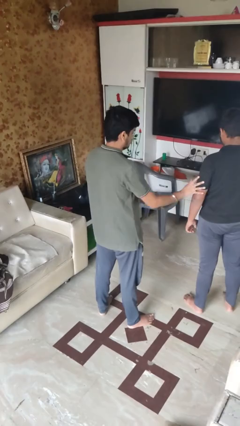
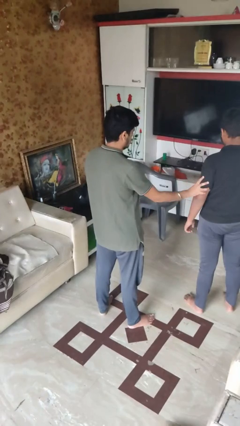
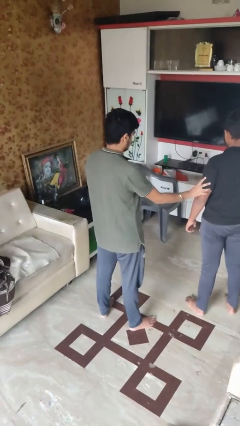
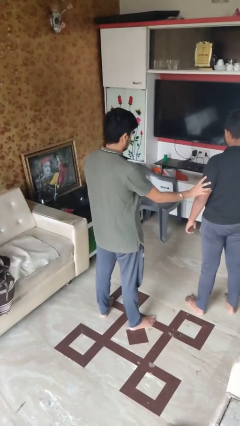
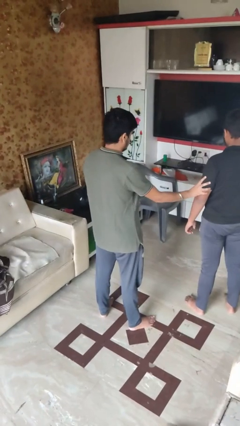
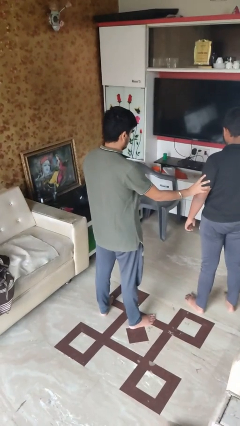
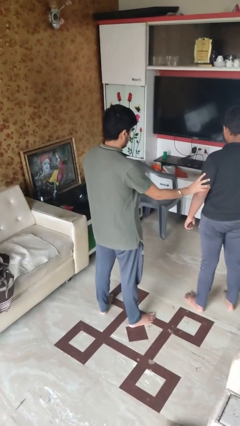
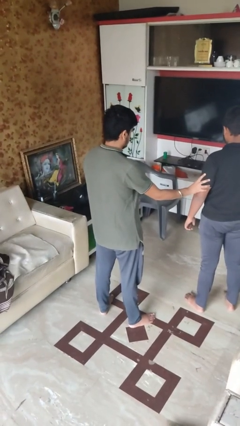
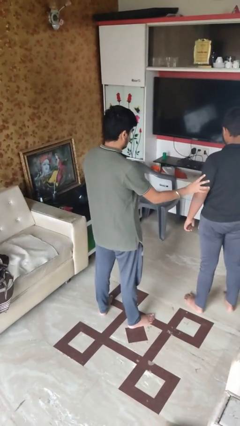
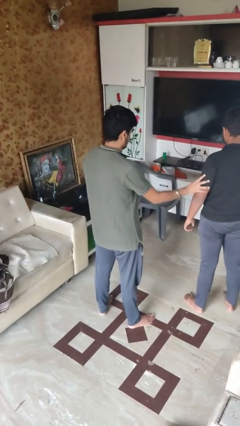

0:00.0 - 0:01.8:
person grabs person by bicep

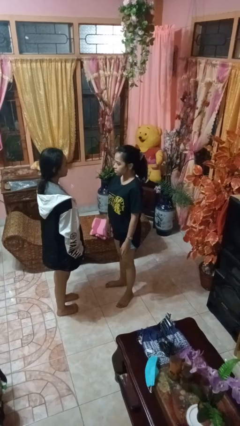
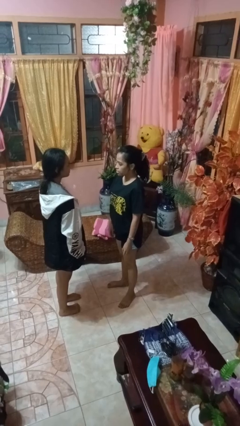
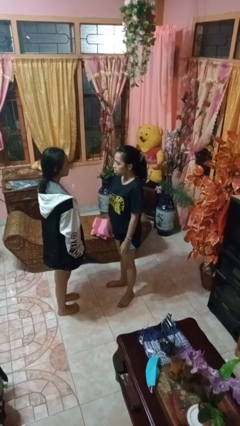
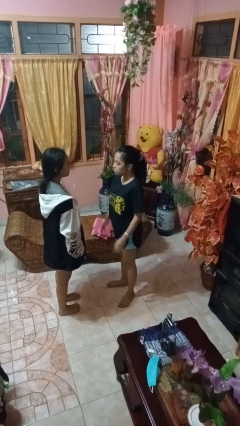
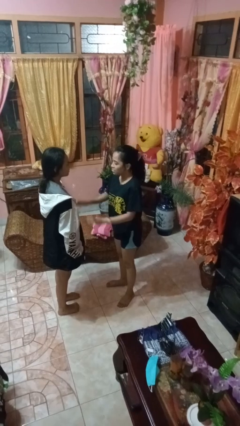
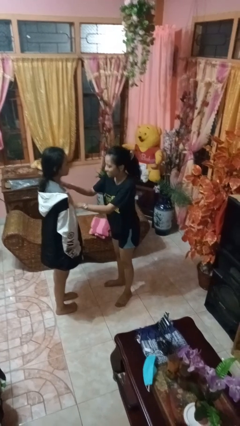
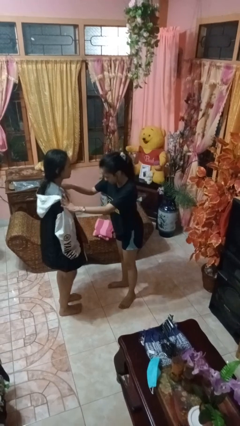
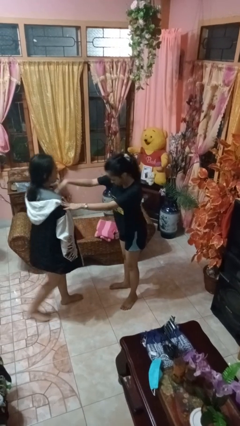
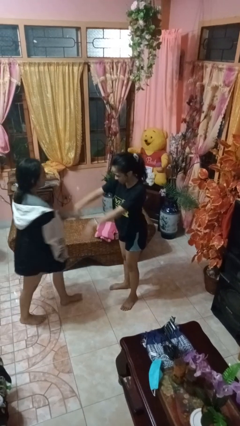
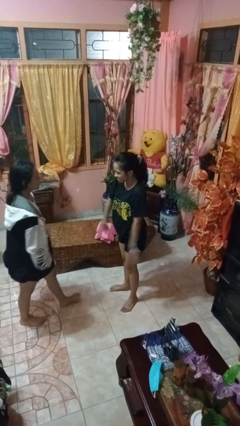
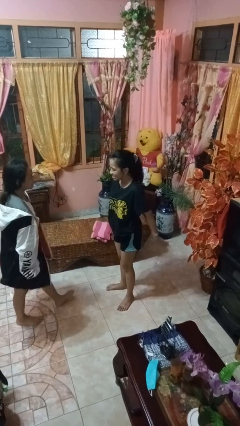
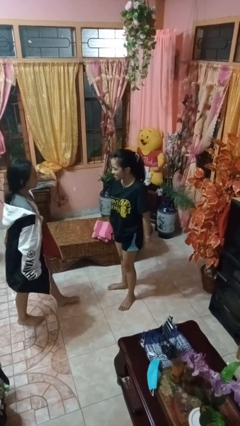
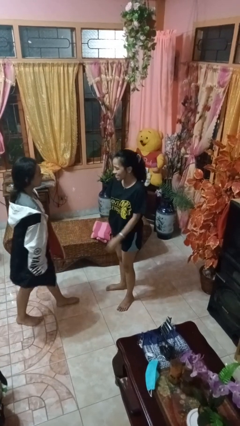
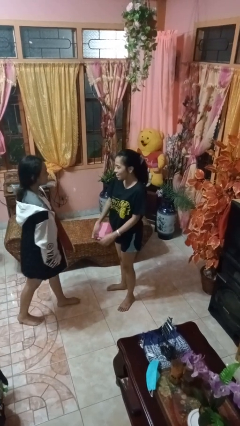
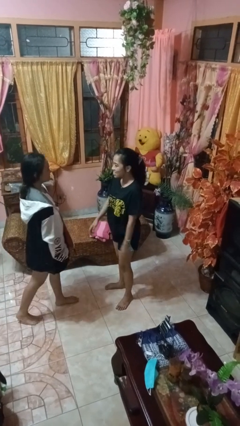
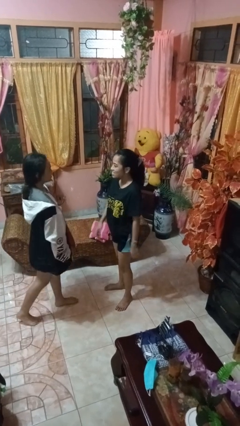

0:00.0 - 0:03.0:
person shoves person

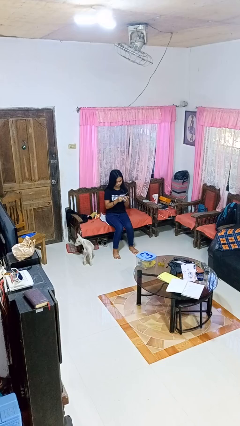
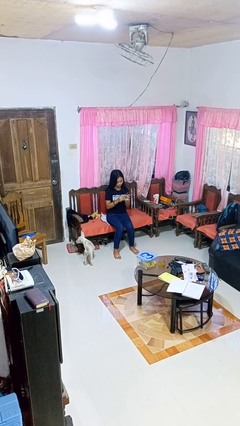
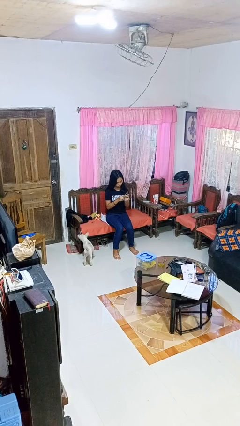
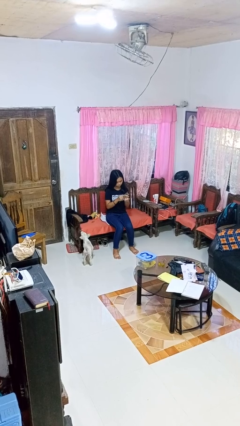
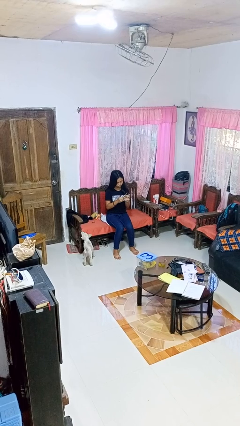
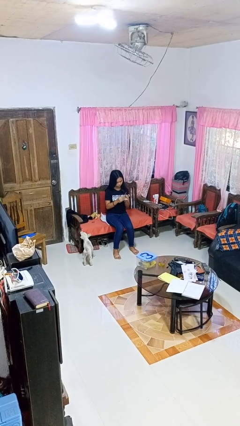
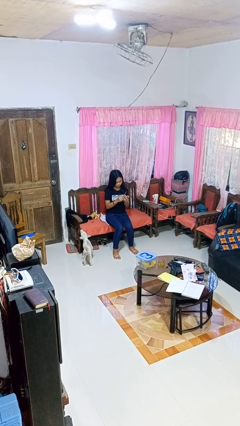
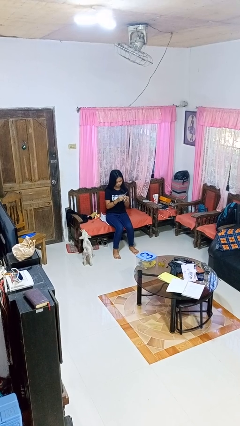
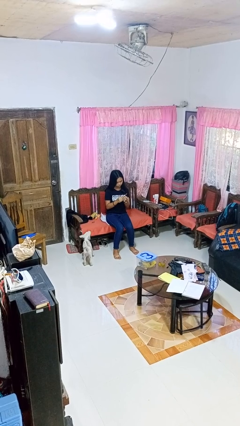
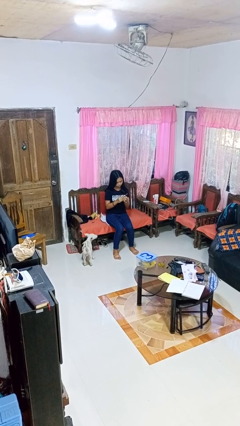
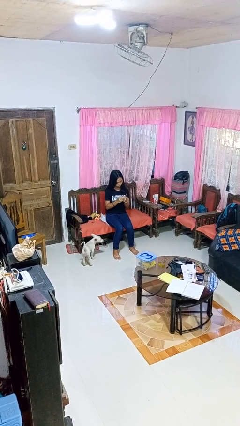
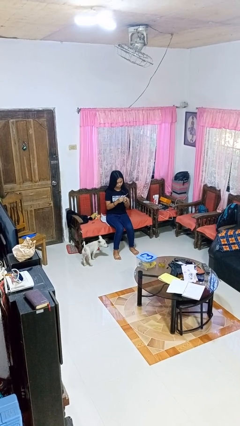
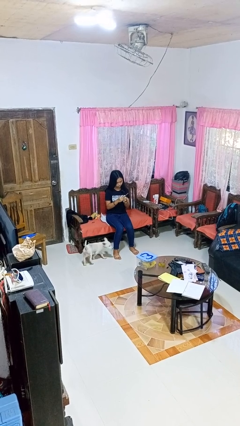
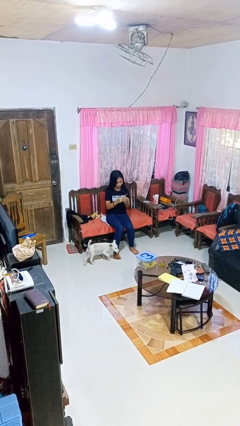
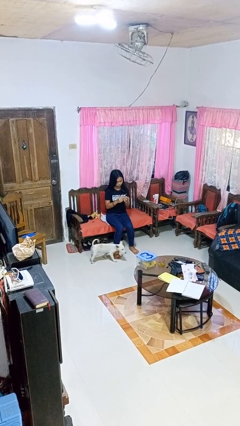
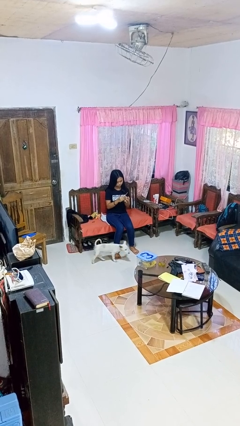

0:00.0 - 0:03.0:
person files fingernails

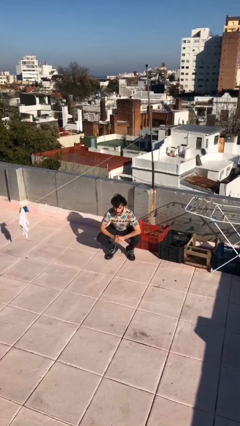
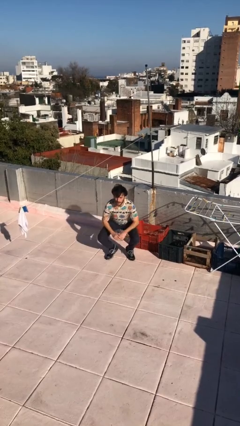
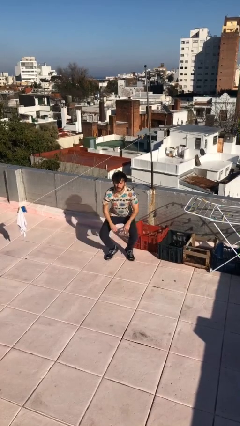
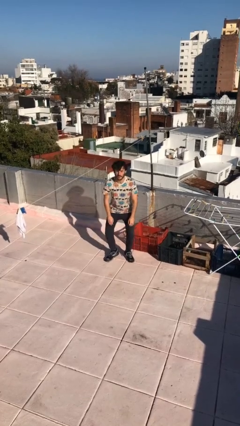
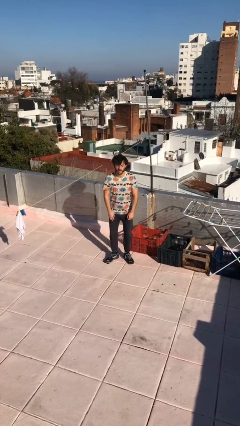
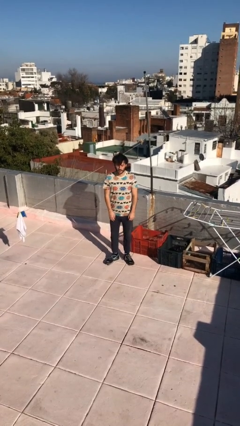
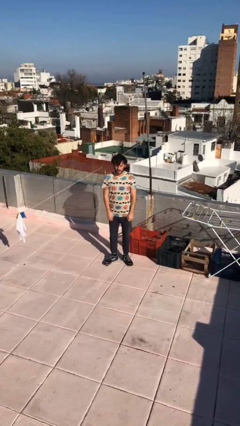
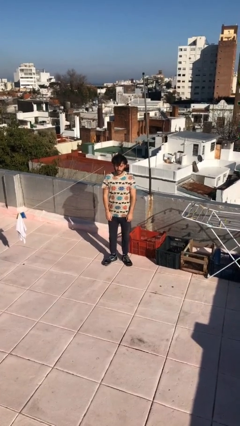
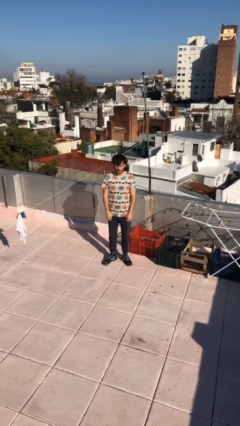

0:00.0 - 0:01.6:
person stands up

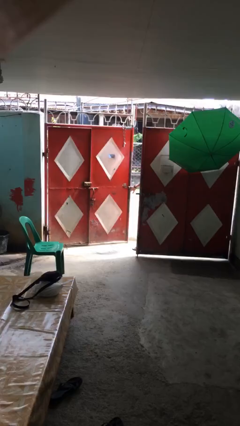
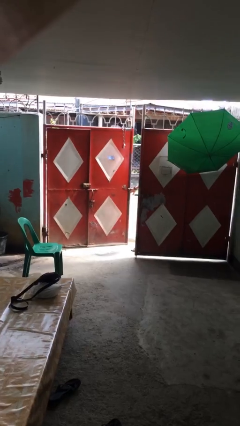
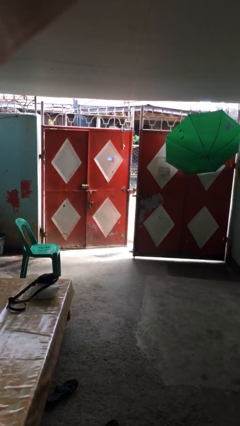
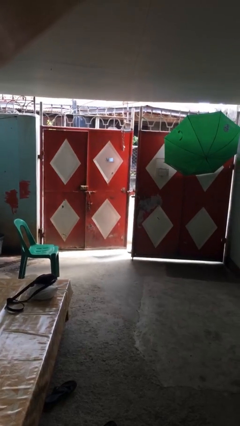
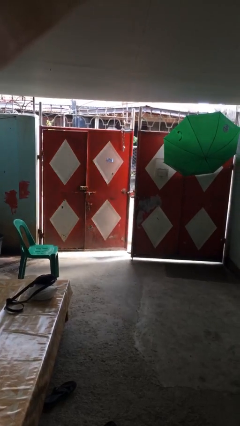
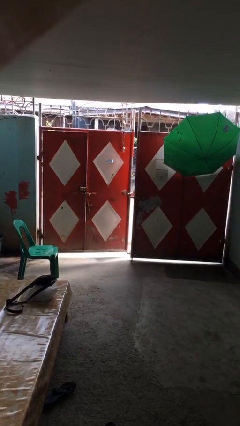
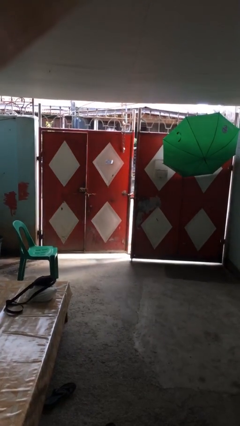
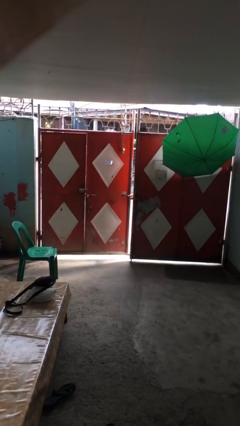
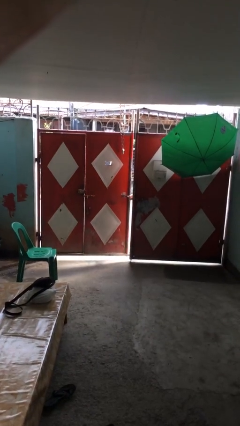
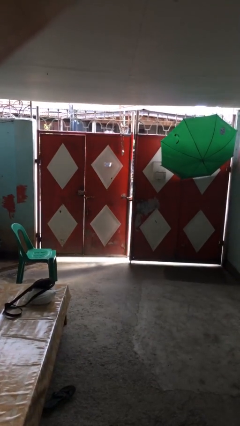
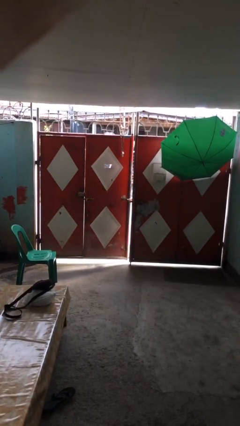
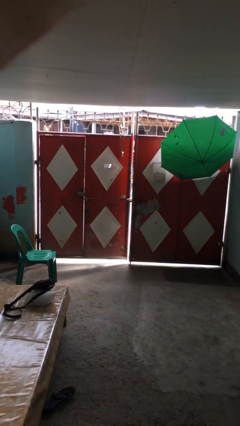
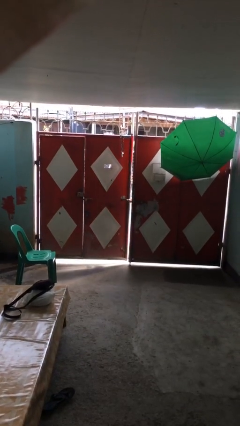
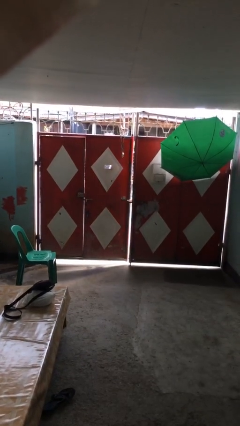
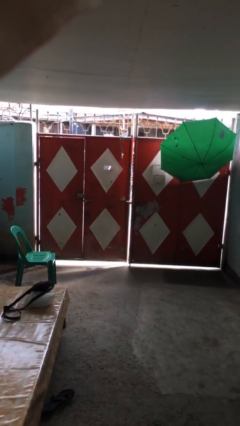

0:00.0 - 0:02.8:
person closes facility door

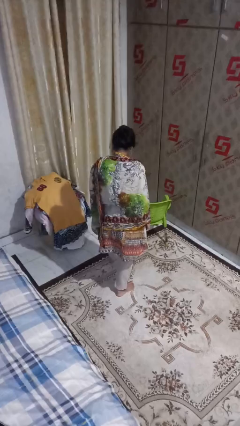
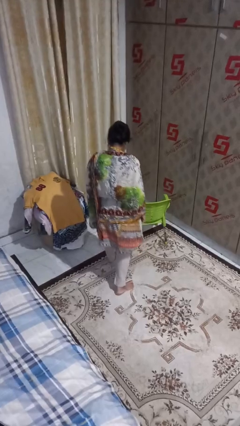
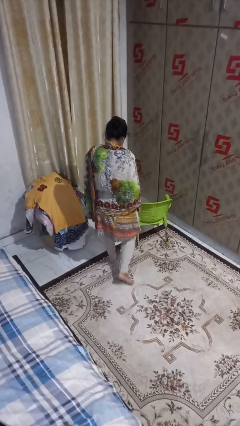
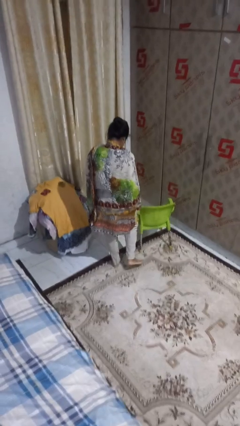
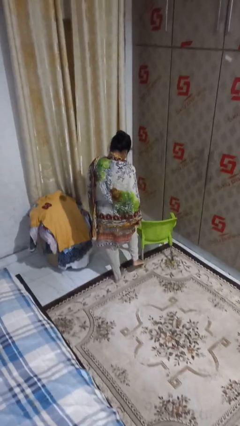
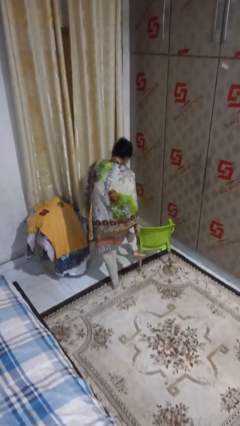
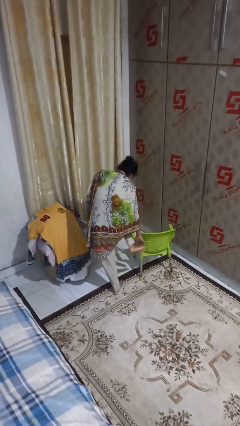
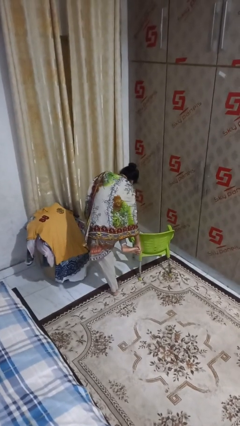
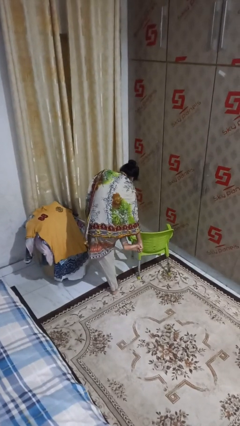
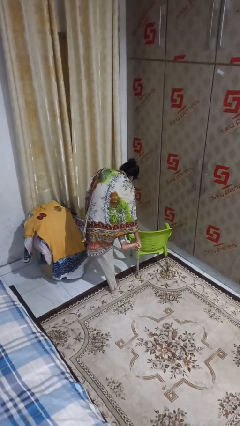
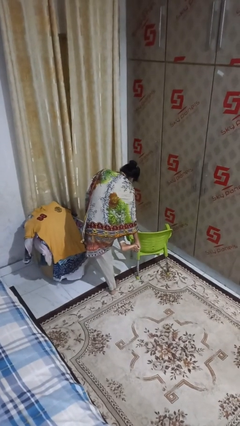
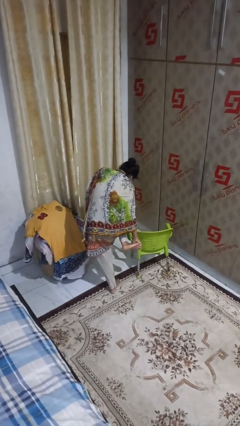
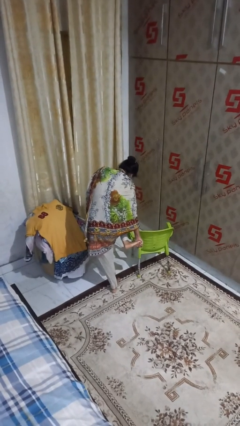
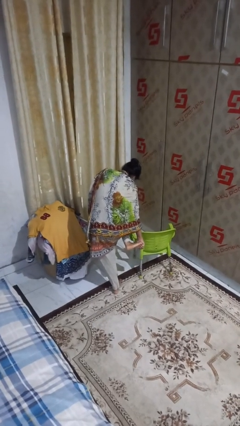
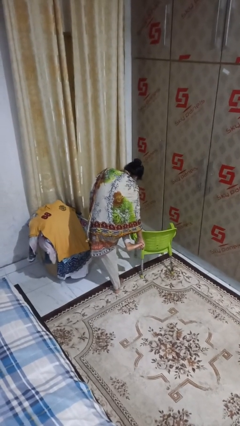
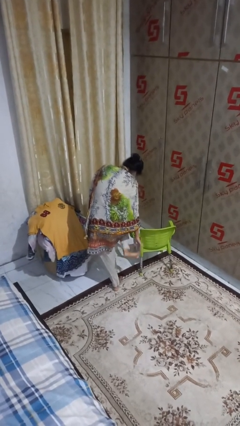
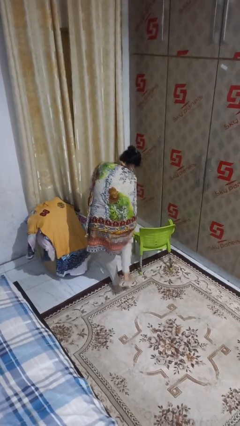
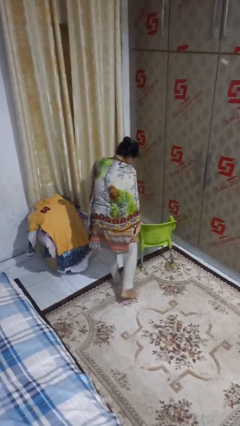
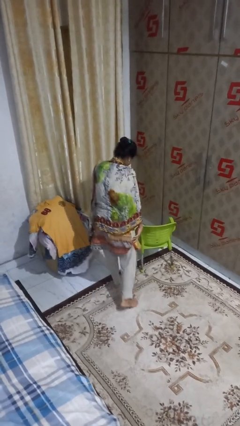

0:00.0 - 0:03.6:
person stubs toe

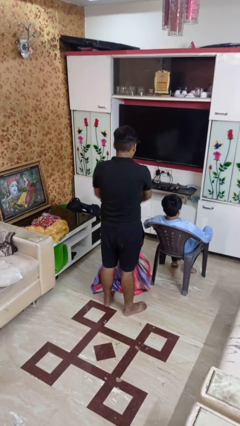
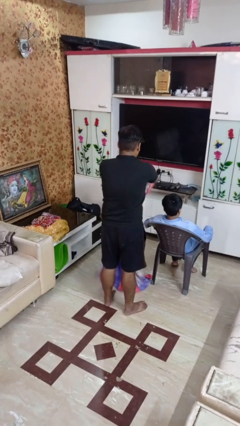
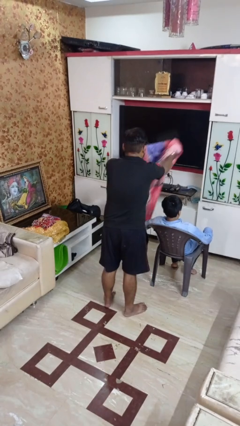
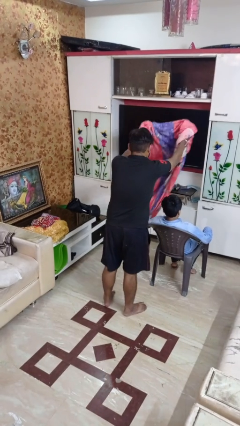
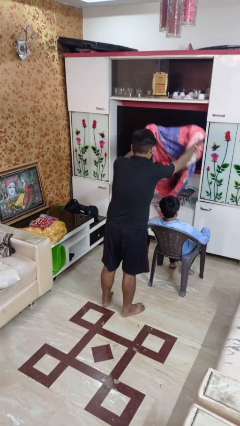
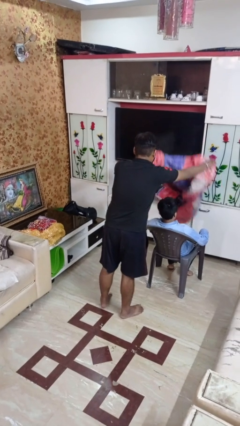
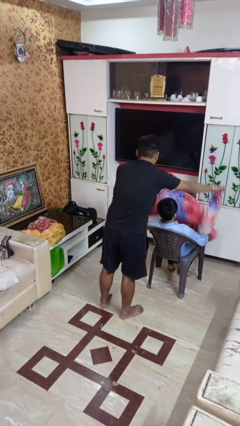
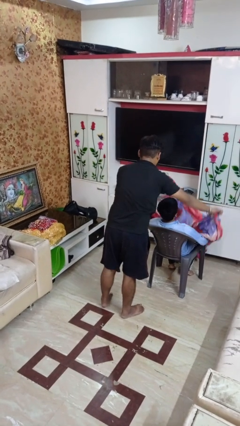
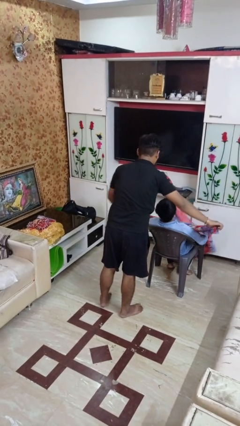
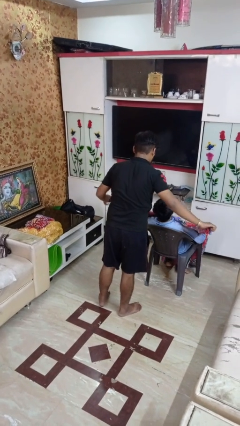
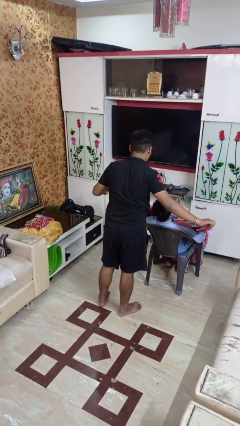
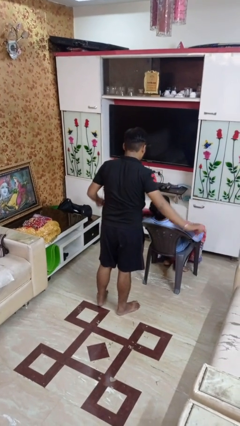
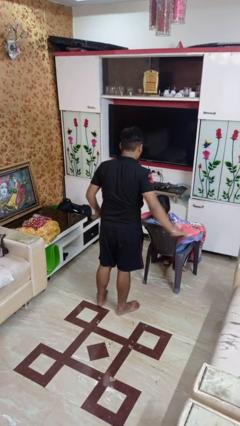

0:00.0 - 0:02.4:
person covers friend with blanket
